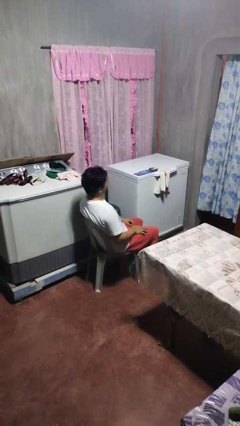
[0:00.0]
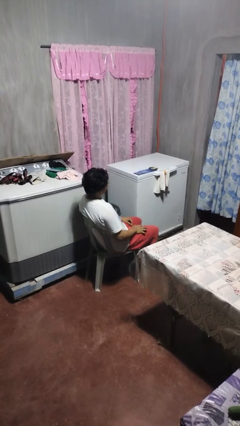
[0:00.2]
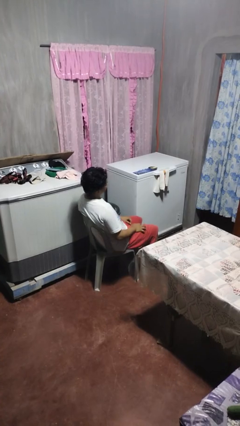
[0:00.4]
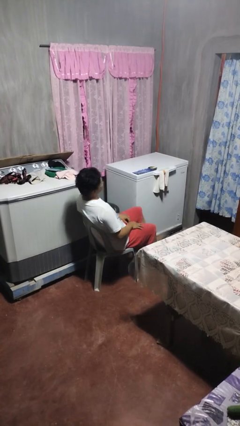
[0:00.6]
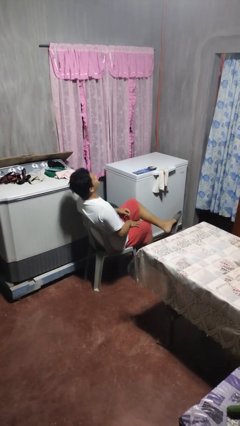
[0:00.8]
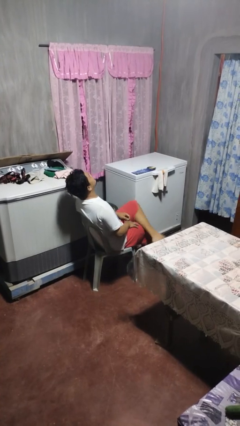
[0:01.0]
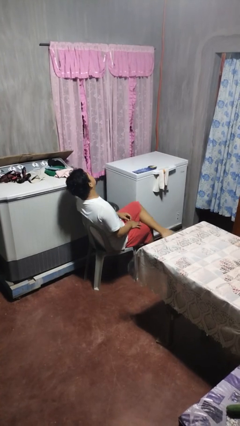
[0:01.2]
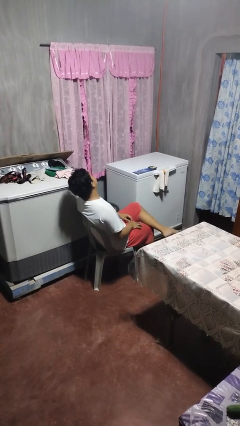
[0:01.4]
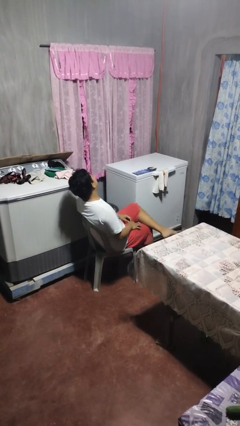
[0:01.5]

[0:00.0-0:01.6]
person crosses legs

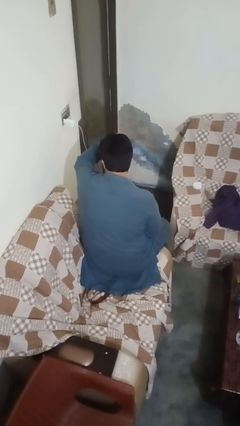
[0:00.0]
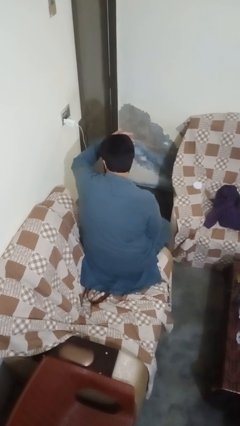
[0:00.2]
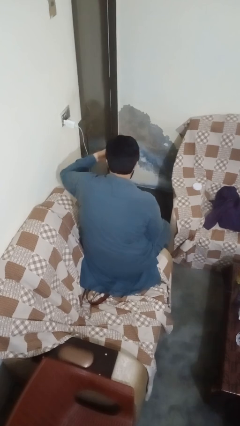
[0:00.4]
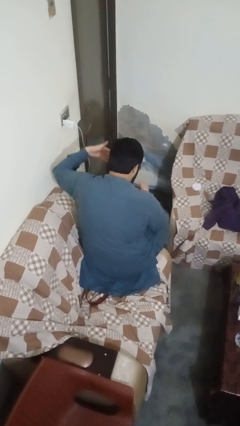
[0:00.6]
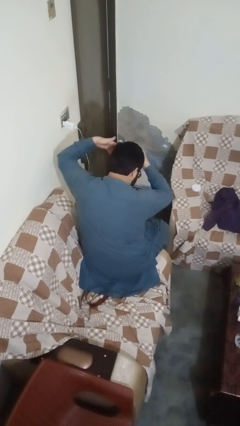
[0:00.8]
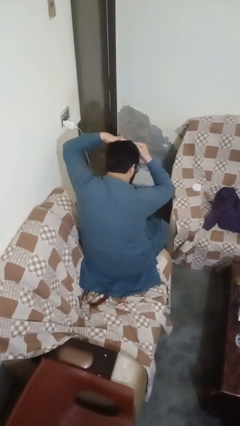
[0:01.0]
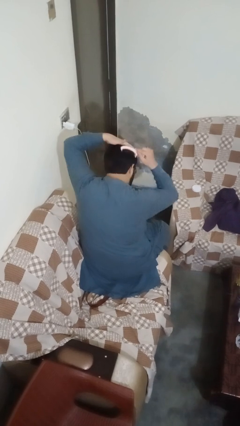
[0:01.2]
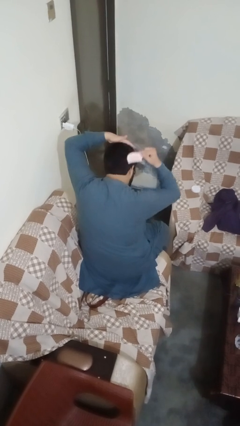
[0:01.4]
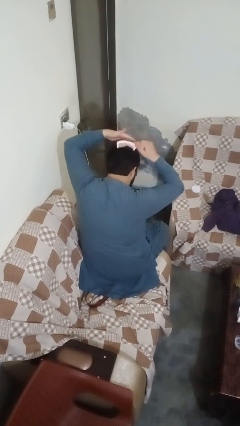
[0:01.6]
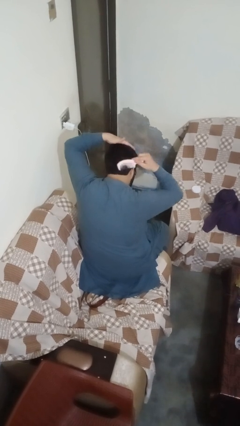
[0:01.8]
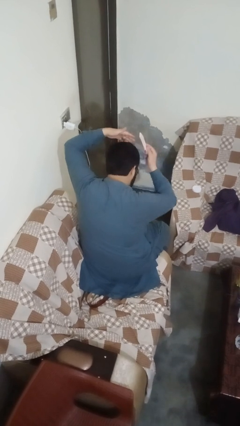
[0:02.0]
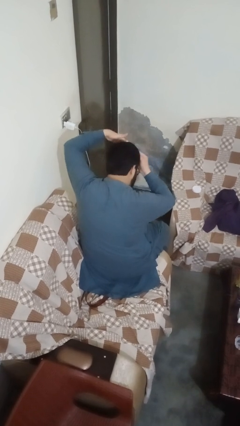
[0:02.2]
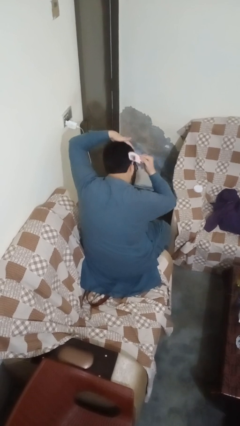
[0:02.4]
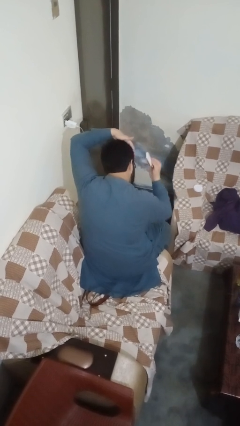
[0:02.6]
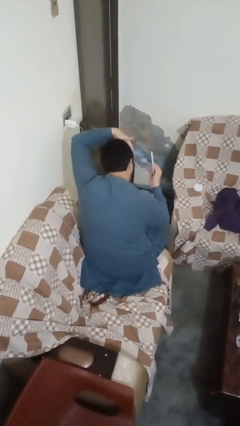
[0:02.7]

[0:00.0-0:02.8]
person brushes hair

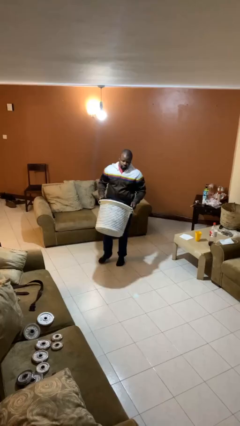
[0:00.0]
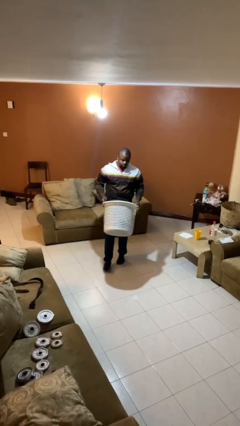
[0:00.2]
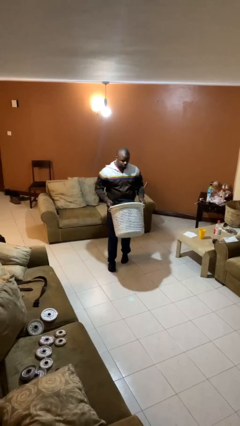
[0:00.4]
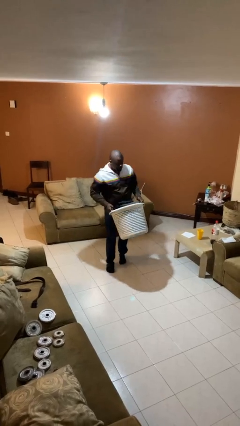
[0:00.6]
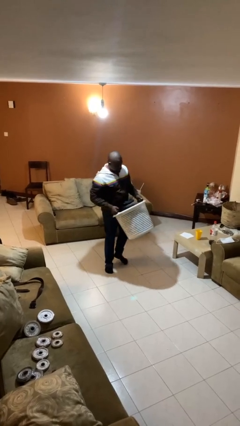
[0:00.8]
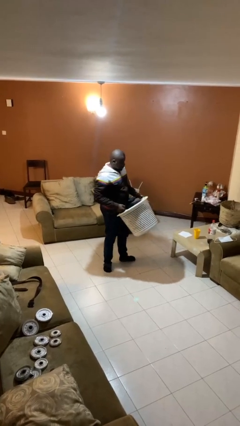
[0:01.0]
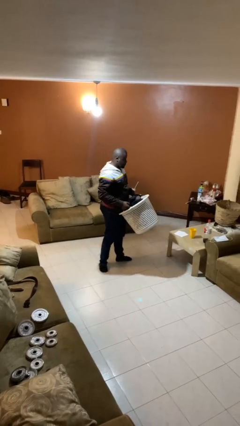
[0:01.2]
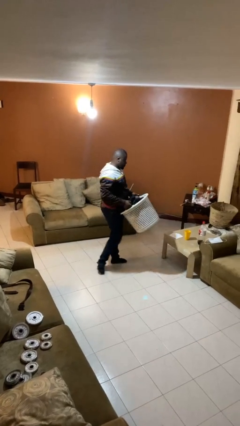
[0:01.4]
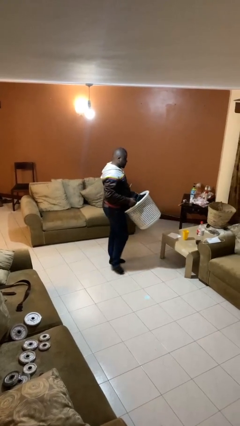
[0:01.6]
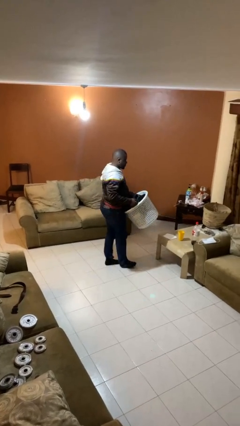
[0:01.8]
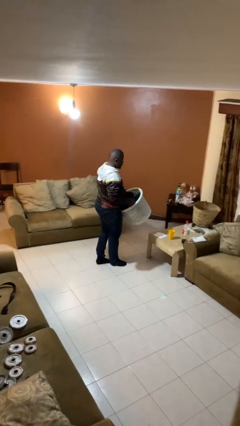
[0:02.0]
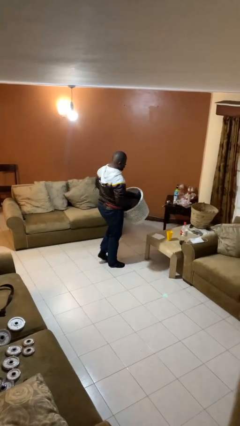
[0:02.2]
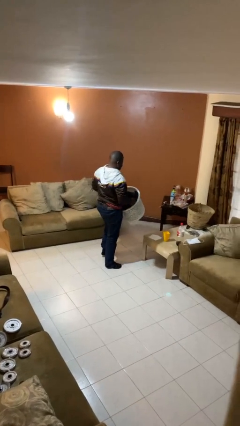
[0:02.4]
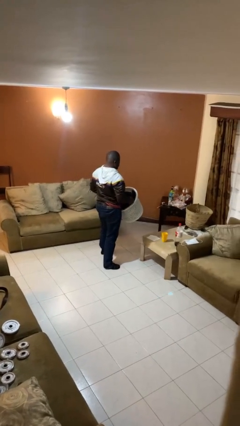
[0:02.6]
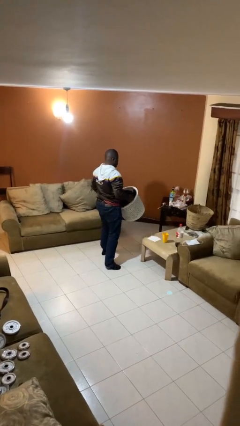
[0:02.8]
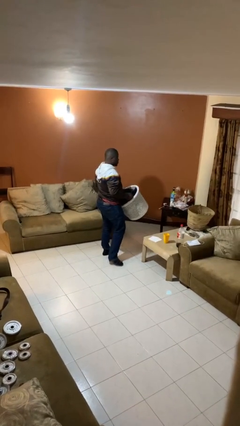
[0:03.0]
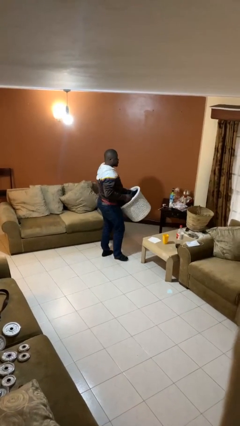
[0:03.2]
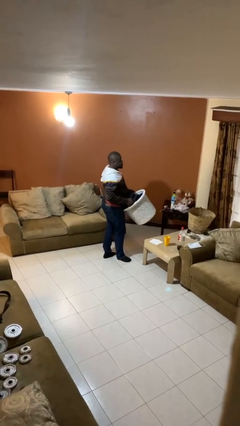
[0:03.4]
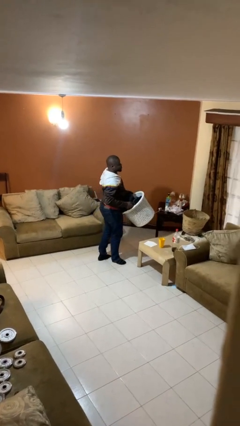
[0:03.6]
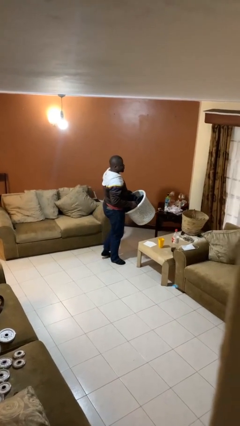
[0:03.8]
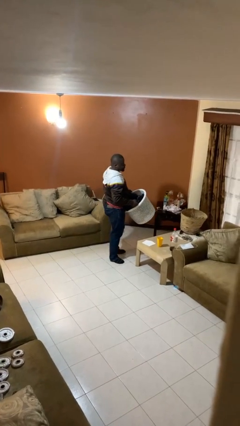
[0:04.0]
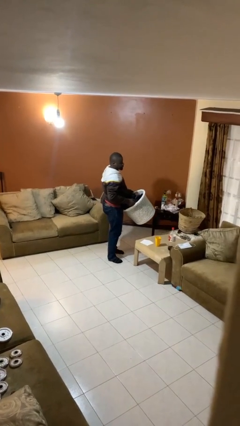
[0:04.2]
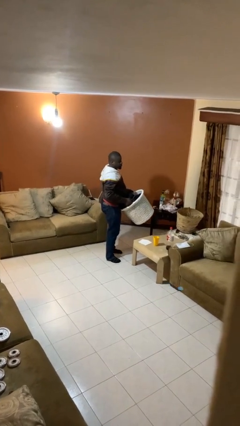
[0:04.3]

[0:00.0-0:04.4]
person carries laundry basket

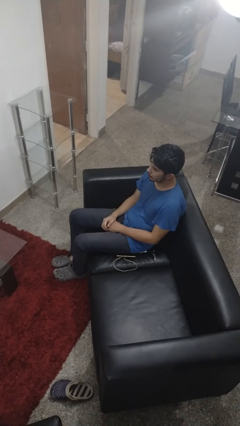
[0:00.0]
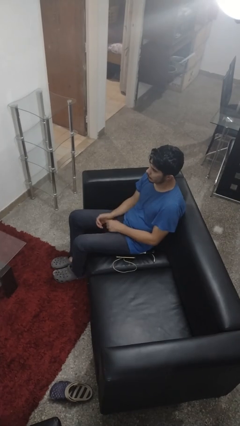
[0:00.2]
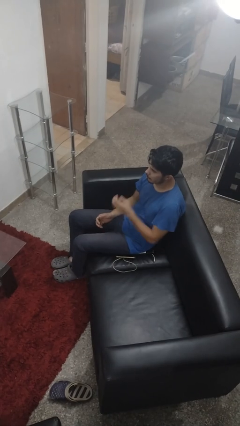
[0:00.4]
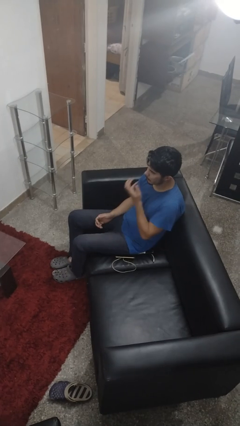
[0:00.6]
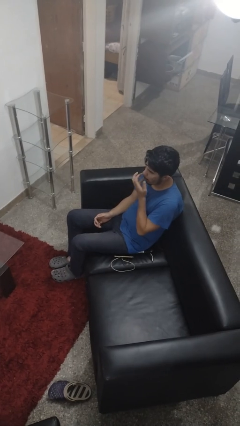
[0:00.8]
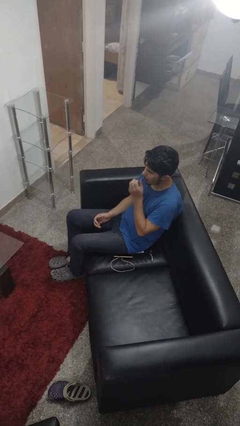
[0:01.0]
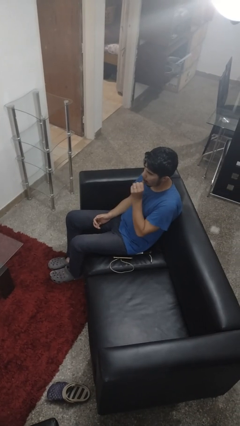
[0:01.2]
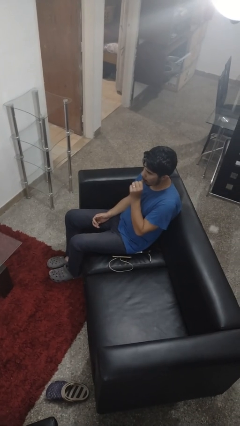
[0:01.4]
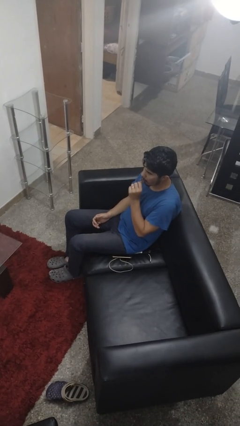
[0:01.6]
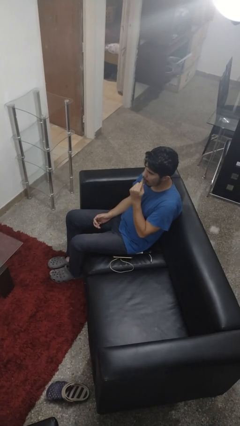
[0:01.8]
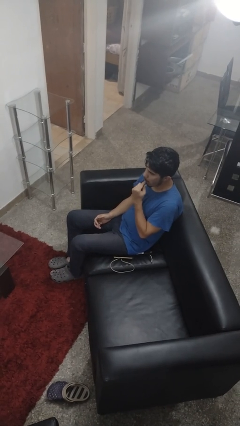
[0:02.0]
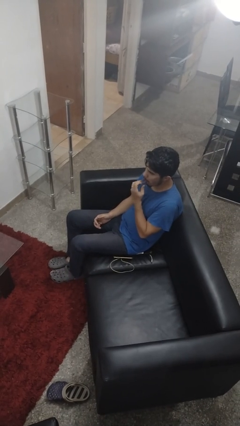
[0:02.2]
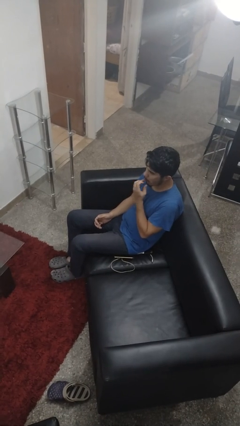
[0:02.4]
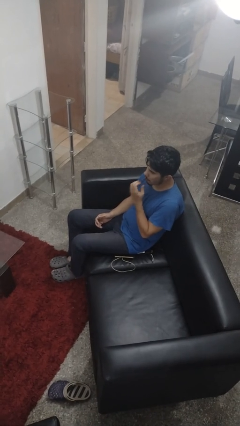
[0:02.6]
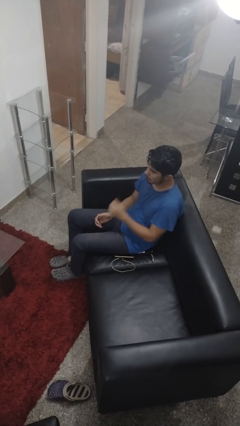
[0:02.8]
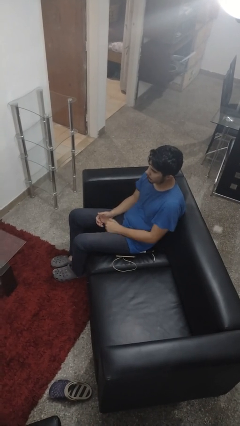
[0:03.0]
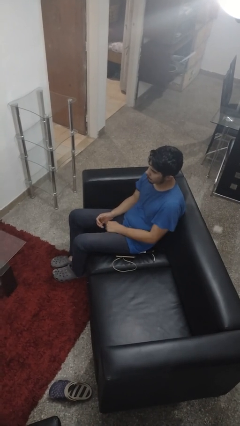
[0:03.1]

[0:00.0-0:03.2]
person licks fingers

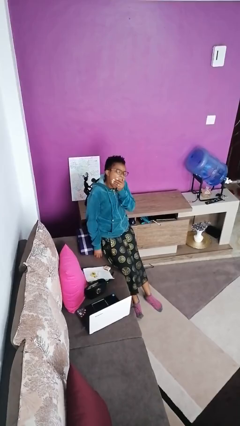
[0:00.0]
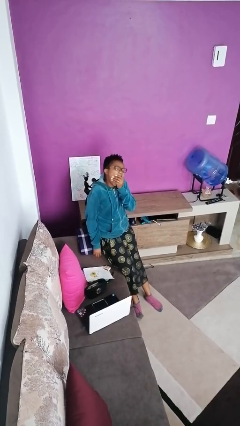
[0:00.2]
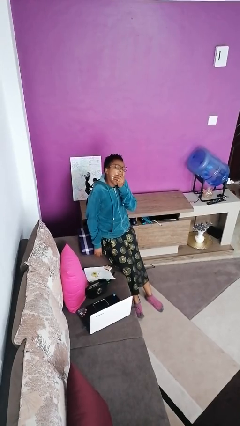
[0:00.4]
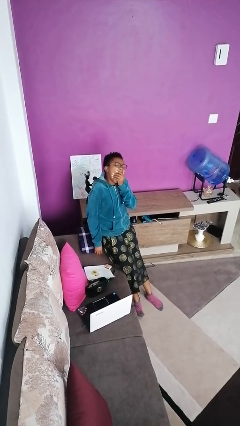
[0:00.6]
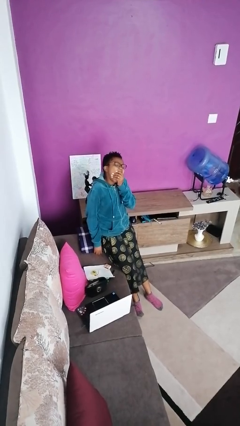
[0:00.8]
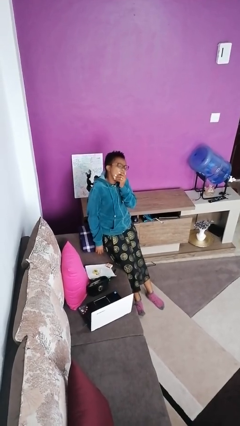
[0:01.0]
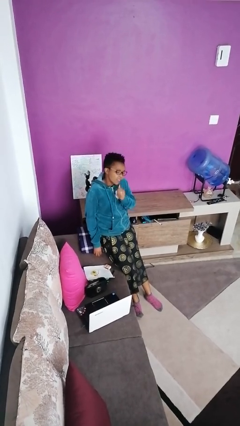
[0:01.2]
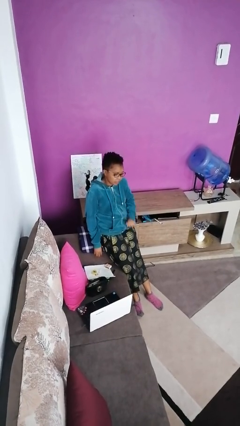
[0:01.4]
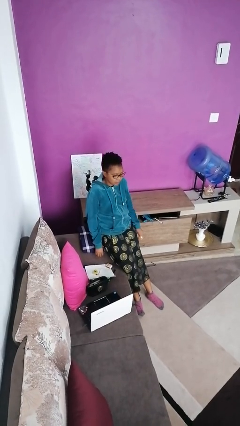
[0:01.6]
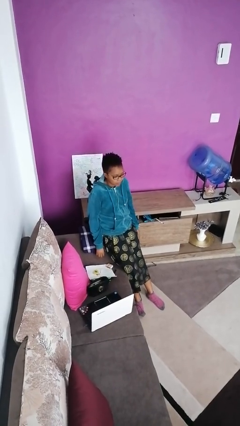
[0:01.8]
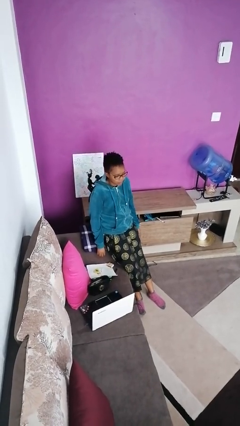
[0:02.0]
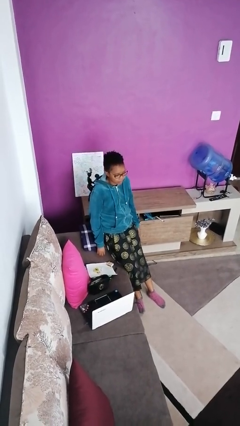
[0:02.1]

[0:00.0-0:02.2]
person closes cabinet

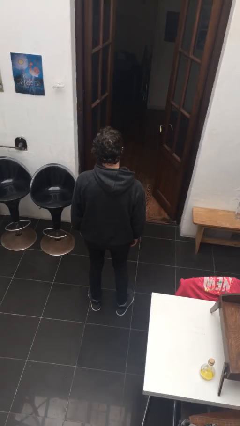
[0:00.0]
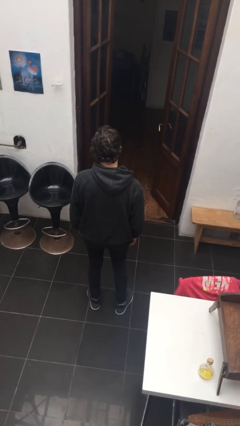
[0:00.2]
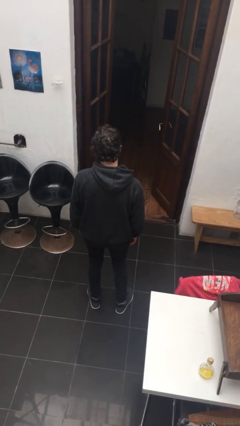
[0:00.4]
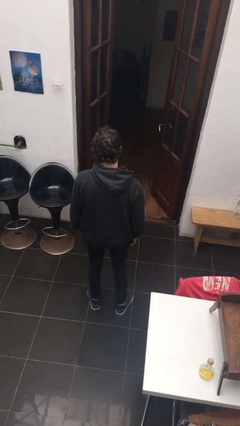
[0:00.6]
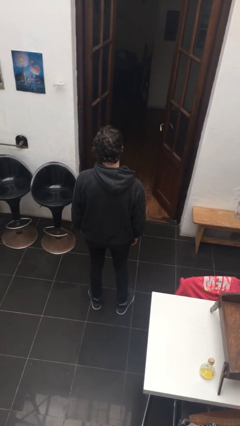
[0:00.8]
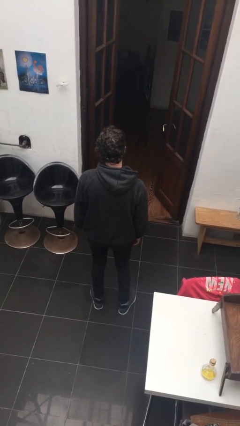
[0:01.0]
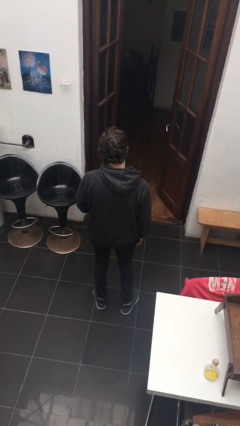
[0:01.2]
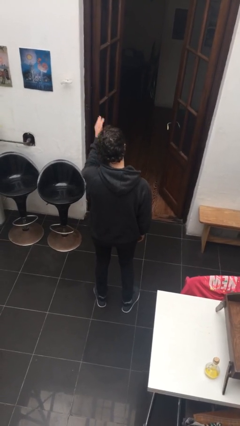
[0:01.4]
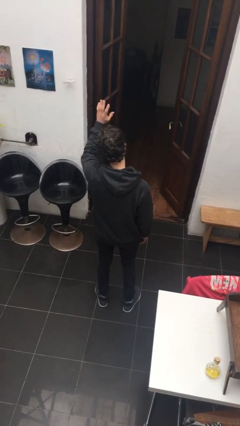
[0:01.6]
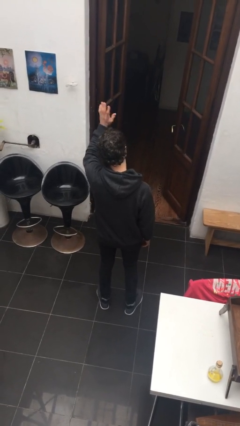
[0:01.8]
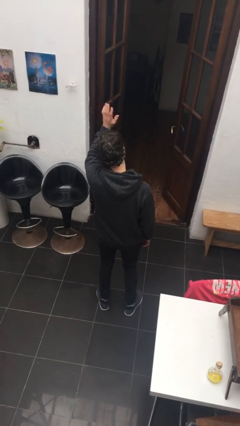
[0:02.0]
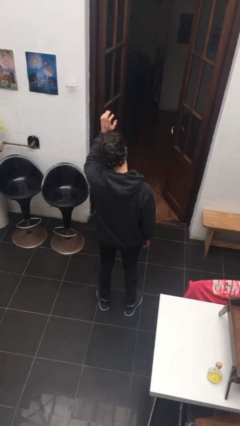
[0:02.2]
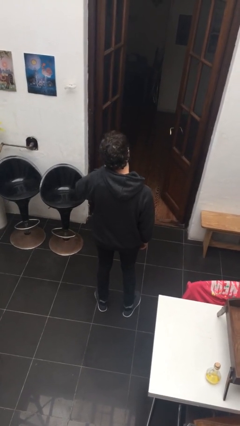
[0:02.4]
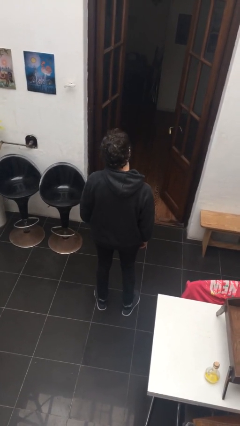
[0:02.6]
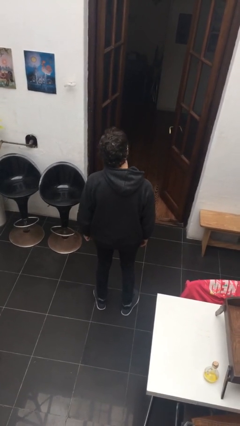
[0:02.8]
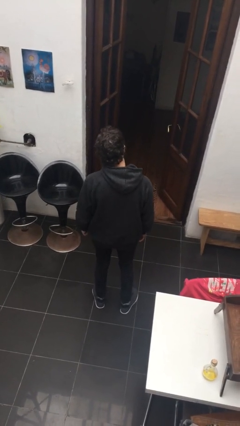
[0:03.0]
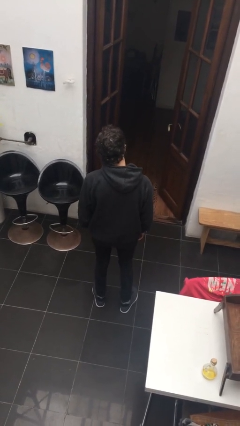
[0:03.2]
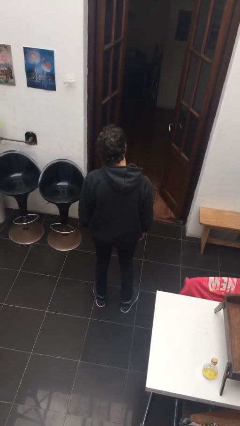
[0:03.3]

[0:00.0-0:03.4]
person waves at person
